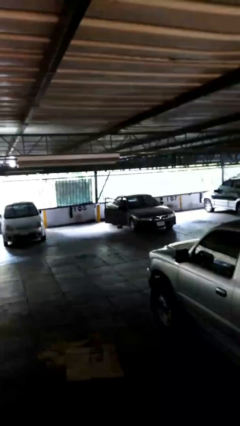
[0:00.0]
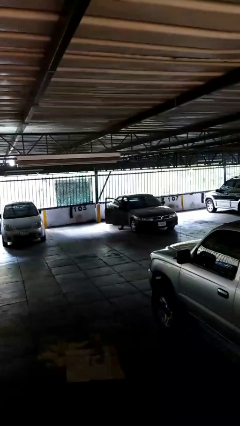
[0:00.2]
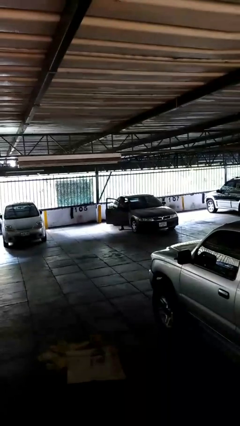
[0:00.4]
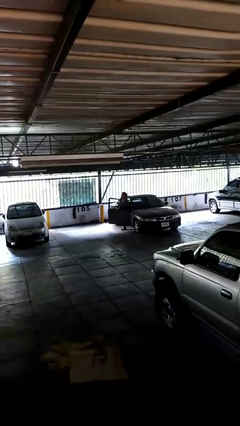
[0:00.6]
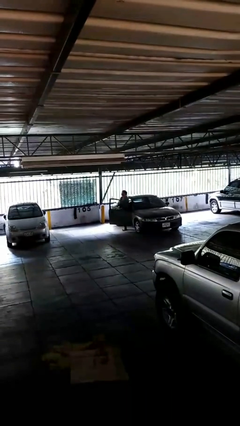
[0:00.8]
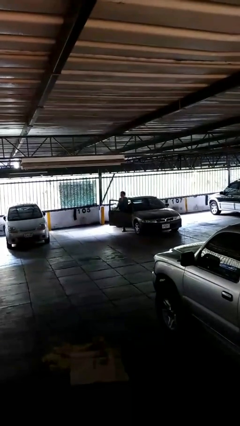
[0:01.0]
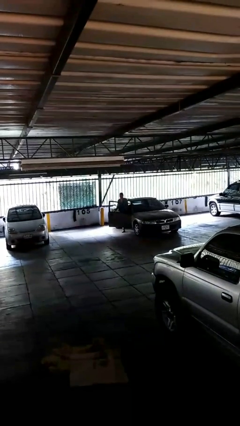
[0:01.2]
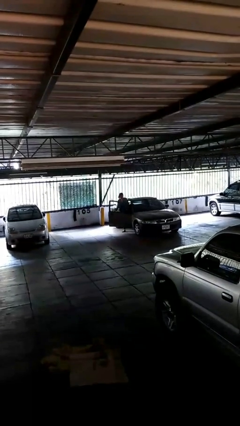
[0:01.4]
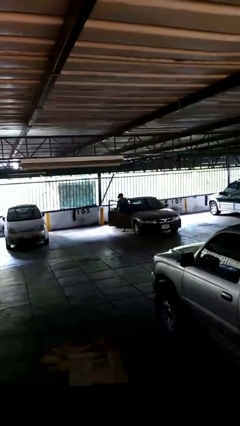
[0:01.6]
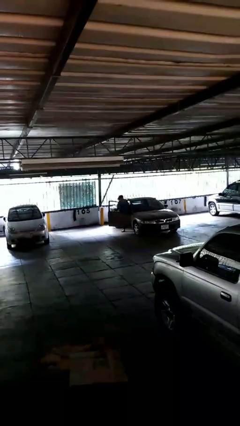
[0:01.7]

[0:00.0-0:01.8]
person exits car

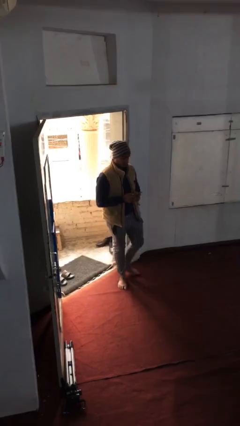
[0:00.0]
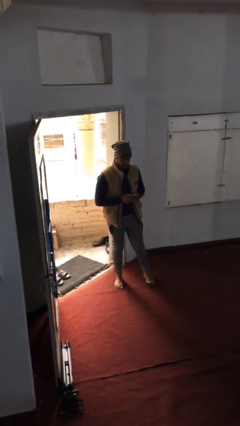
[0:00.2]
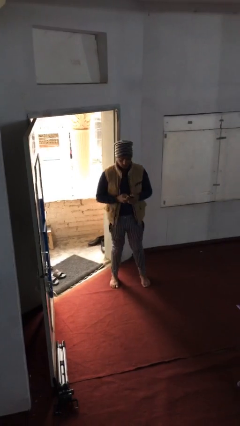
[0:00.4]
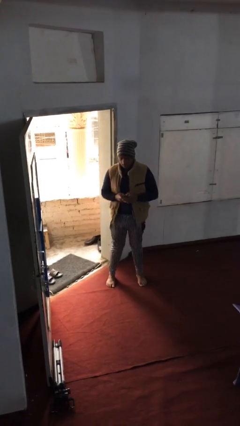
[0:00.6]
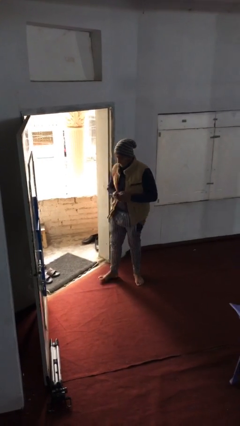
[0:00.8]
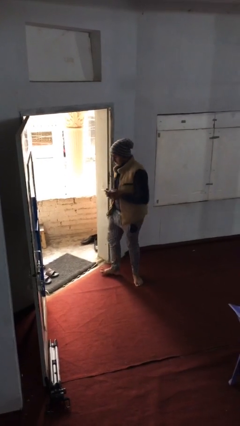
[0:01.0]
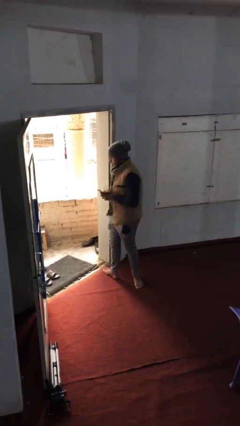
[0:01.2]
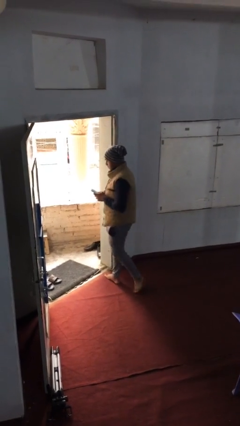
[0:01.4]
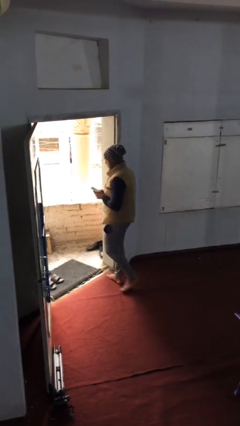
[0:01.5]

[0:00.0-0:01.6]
person exits scene through structure

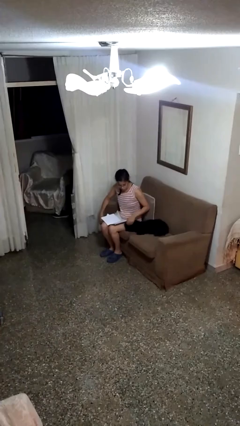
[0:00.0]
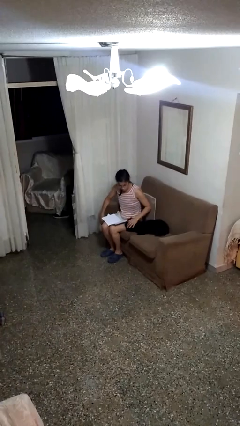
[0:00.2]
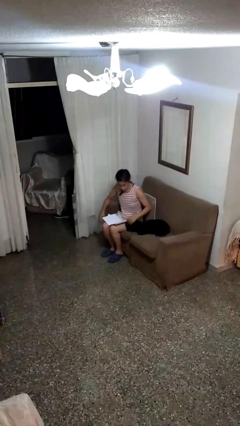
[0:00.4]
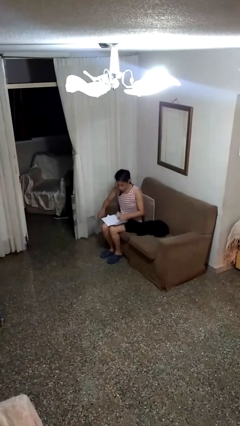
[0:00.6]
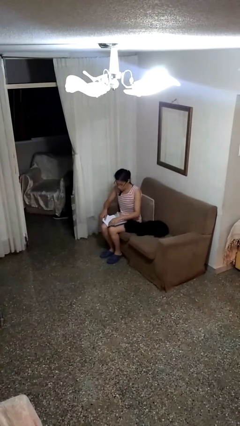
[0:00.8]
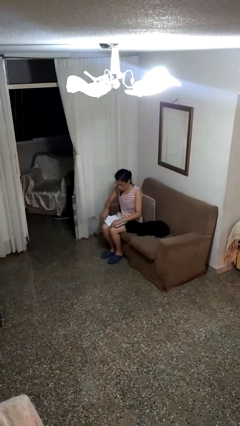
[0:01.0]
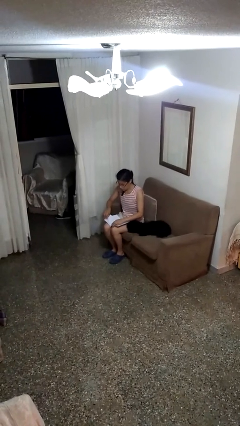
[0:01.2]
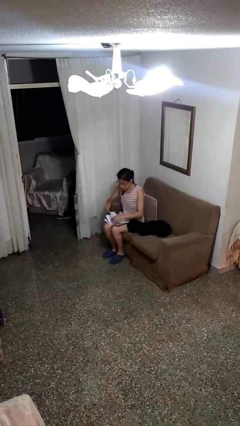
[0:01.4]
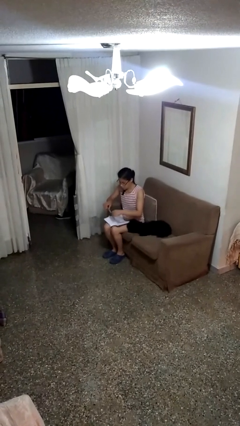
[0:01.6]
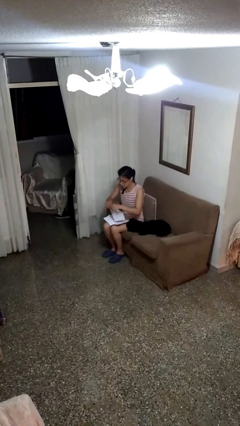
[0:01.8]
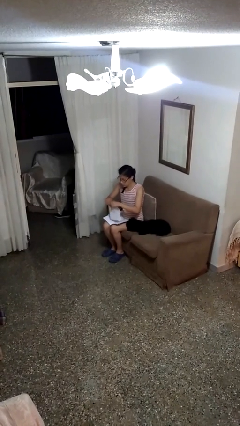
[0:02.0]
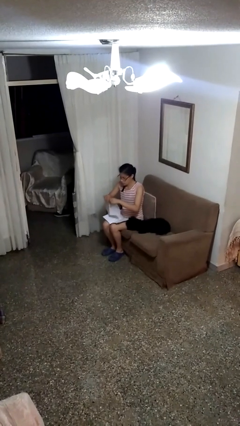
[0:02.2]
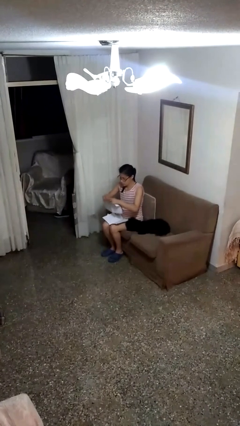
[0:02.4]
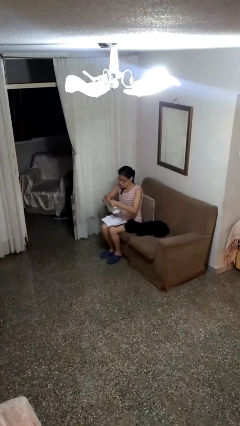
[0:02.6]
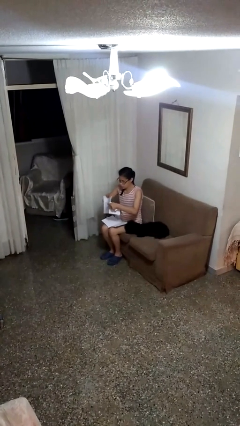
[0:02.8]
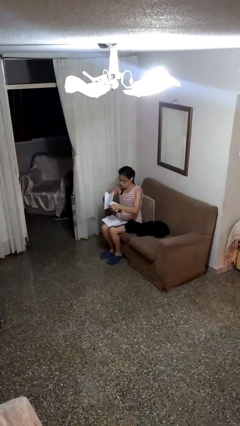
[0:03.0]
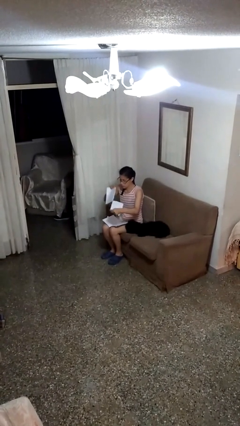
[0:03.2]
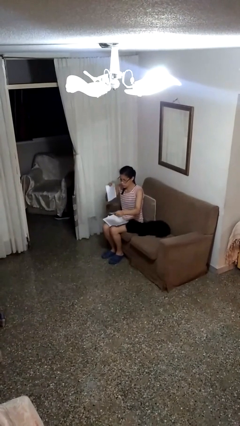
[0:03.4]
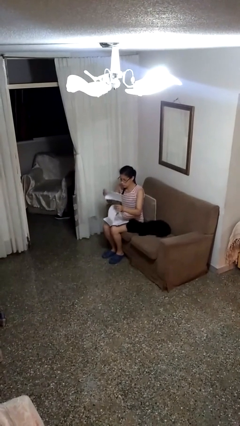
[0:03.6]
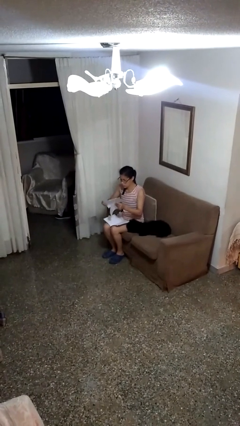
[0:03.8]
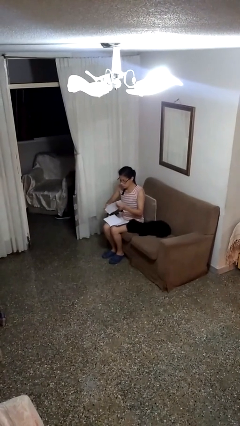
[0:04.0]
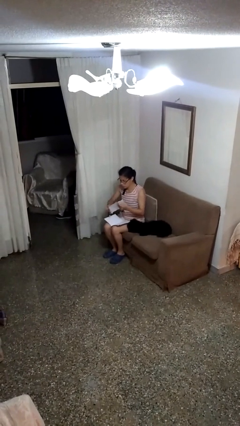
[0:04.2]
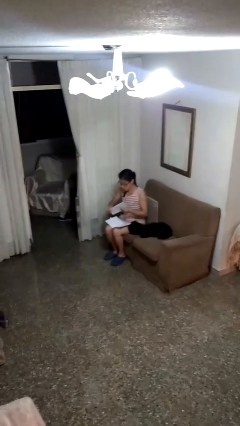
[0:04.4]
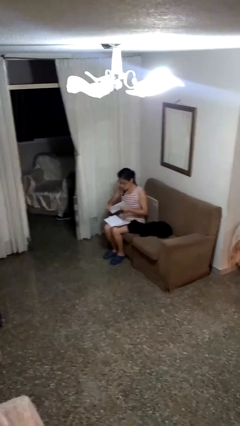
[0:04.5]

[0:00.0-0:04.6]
person tears paper

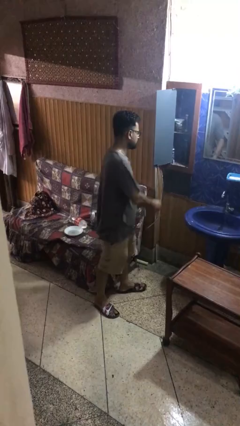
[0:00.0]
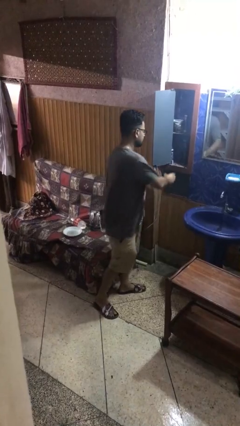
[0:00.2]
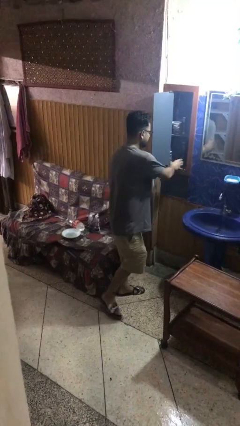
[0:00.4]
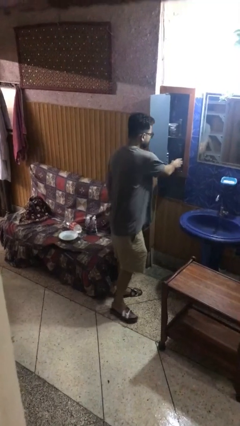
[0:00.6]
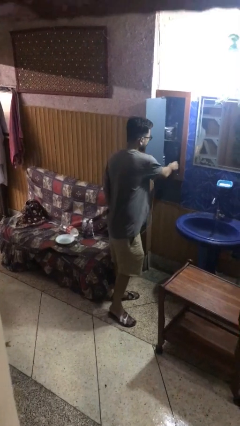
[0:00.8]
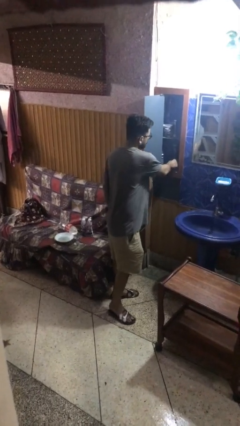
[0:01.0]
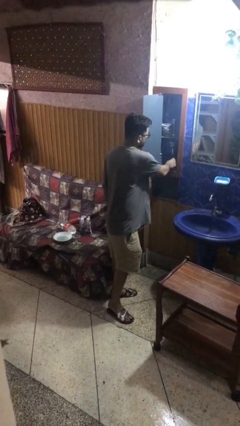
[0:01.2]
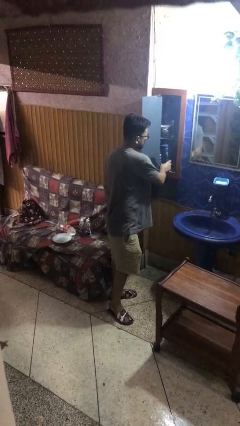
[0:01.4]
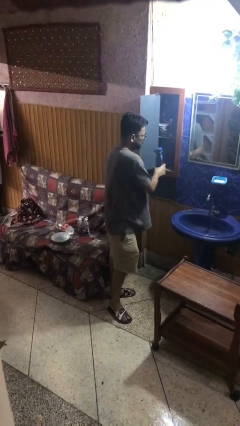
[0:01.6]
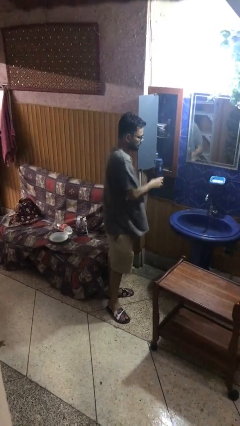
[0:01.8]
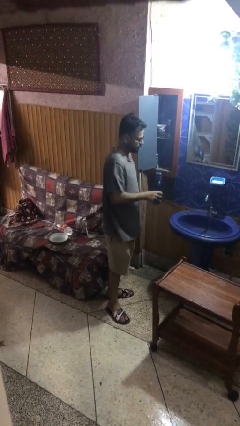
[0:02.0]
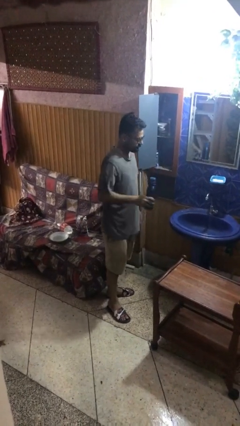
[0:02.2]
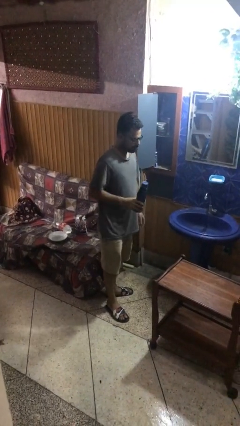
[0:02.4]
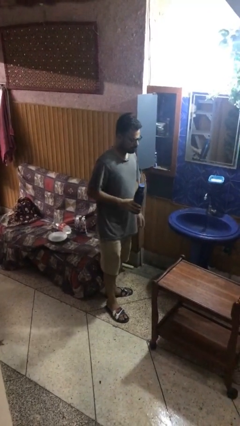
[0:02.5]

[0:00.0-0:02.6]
person picks up object from shelf

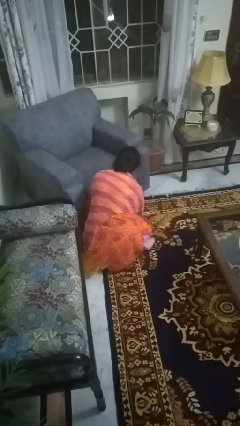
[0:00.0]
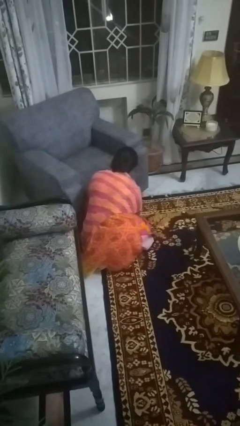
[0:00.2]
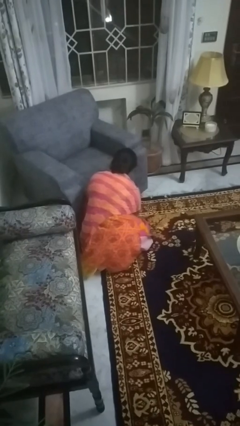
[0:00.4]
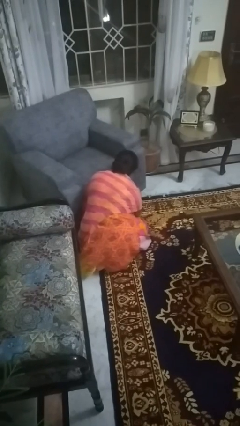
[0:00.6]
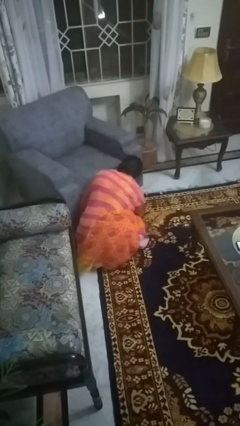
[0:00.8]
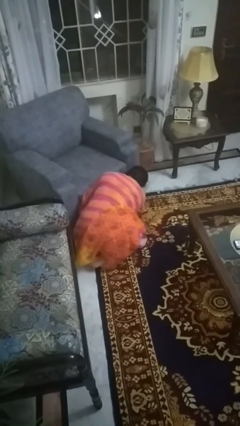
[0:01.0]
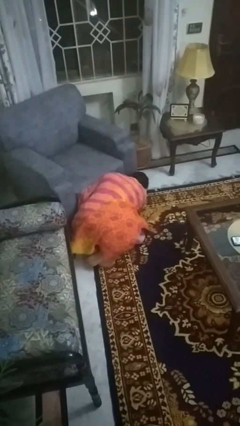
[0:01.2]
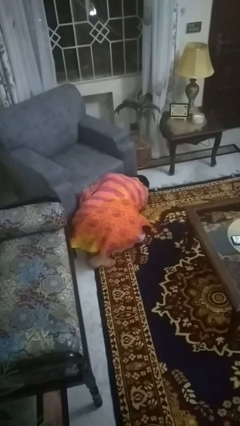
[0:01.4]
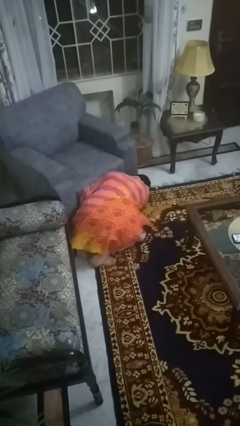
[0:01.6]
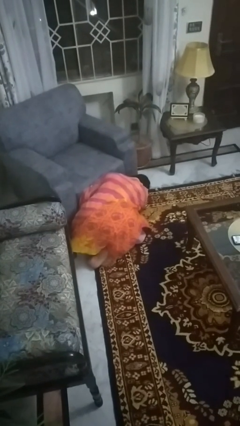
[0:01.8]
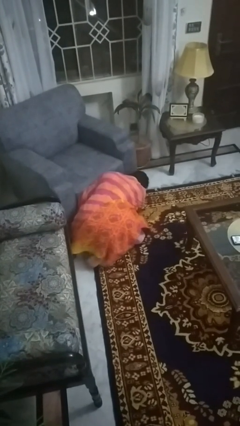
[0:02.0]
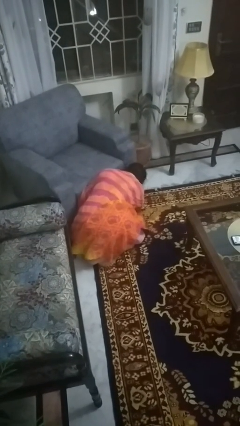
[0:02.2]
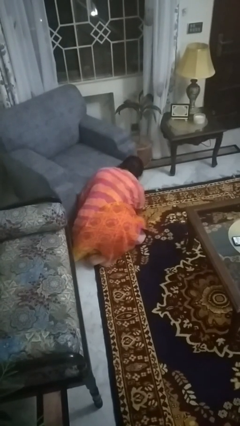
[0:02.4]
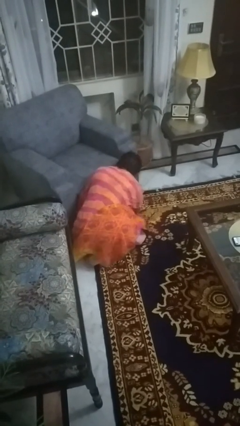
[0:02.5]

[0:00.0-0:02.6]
person searches under couch

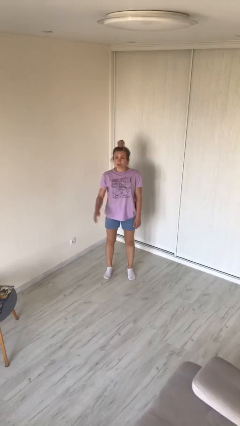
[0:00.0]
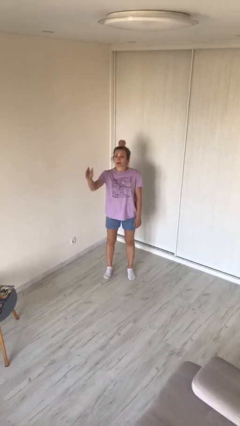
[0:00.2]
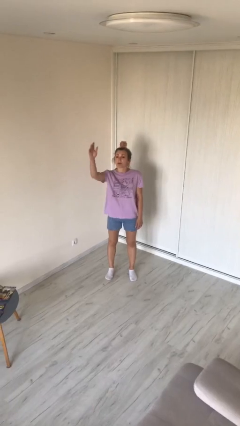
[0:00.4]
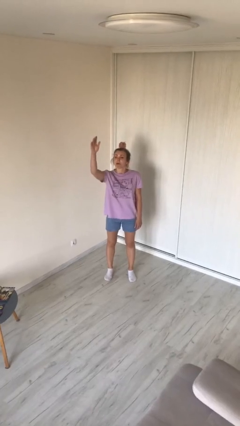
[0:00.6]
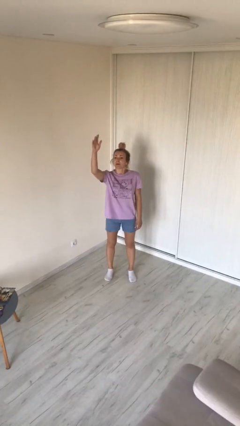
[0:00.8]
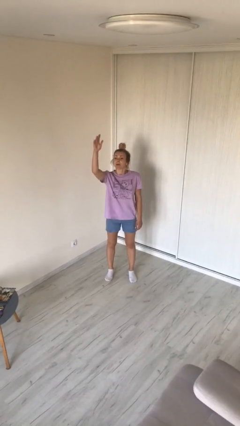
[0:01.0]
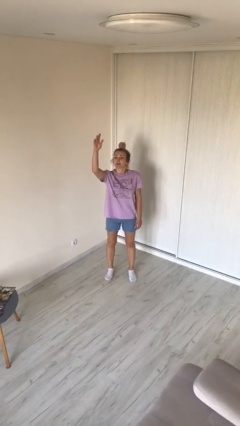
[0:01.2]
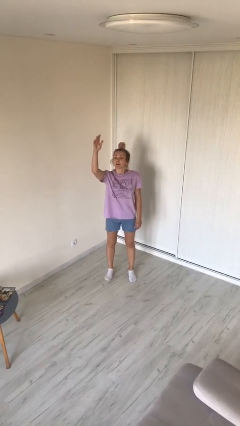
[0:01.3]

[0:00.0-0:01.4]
person gestures raise hand

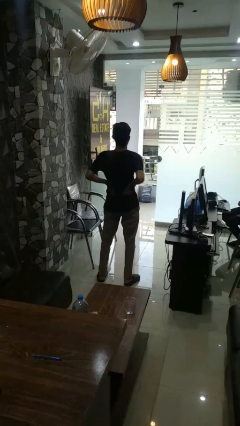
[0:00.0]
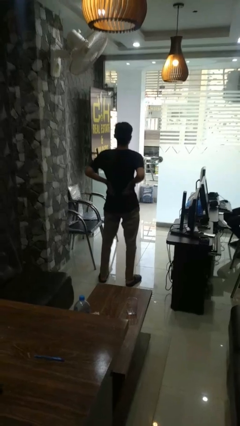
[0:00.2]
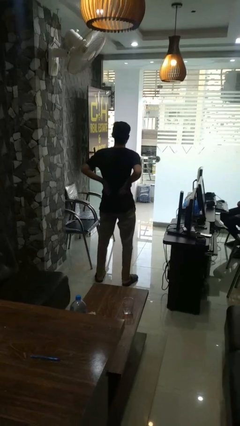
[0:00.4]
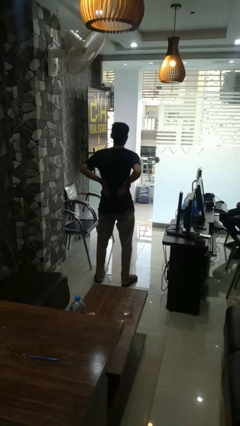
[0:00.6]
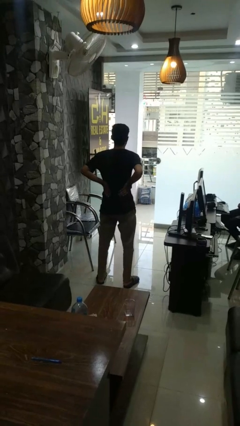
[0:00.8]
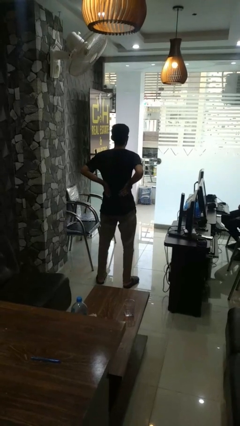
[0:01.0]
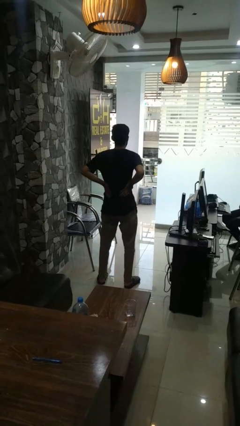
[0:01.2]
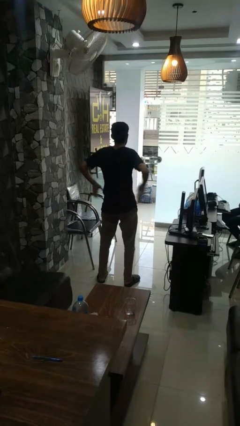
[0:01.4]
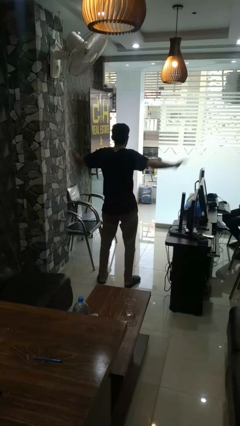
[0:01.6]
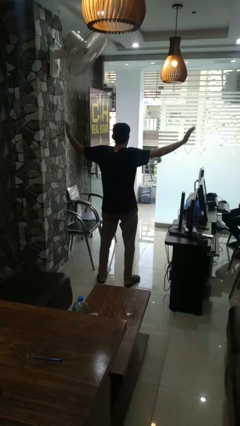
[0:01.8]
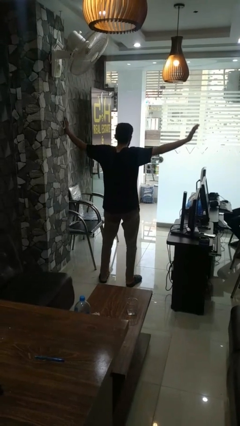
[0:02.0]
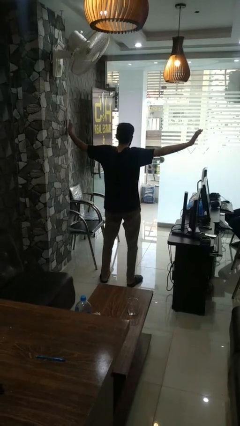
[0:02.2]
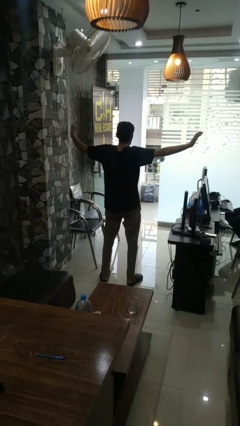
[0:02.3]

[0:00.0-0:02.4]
person stretches arms to side
